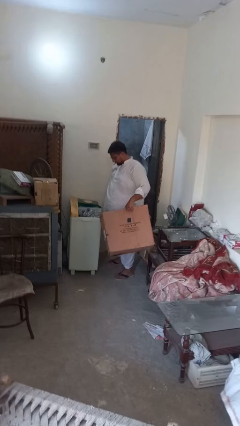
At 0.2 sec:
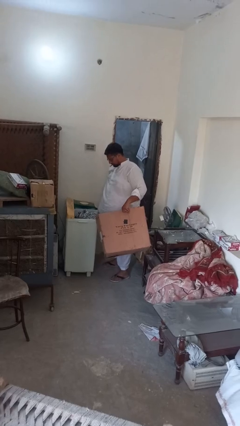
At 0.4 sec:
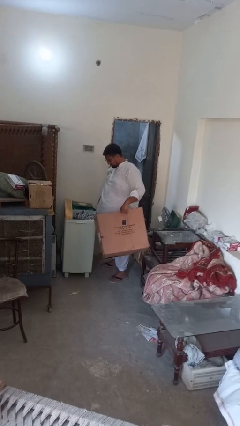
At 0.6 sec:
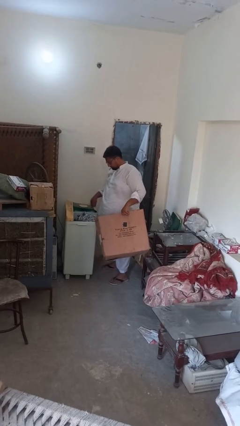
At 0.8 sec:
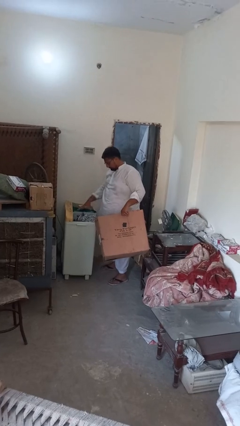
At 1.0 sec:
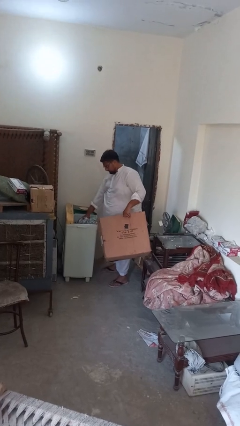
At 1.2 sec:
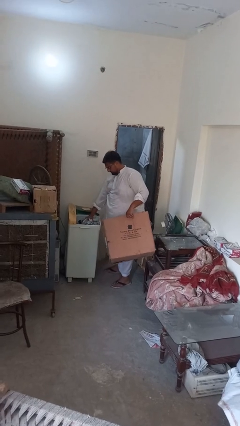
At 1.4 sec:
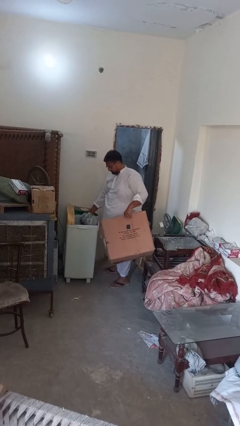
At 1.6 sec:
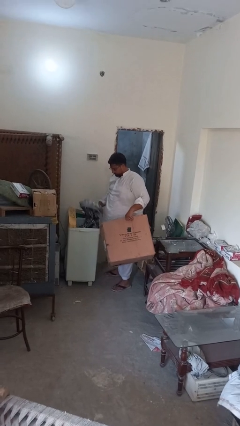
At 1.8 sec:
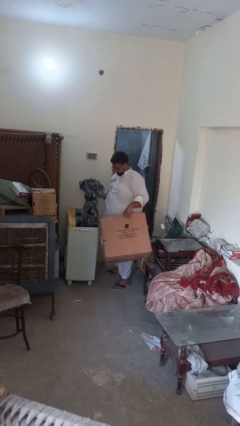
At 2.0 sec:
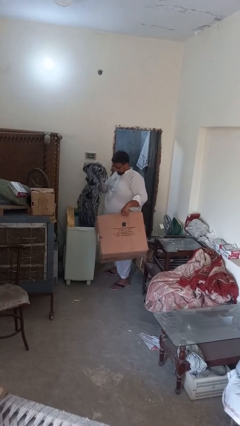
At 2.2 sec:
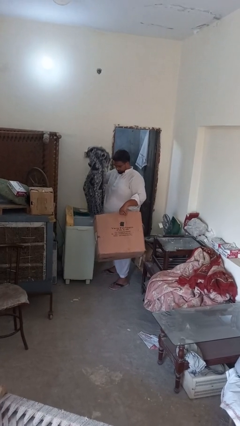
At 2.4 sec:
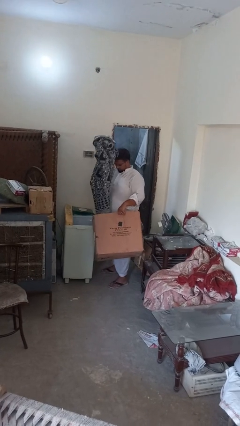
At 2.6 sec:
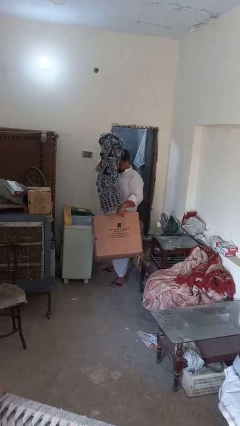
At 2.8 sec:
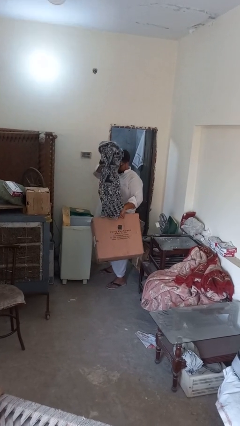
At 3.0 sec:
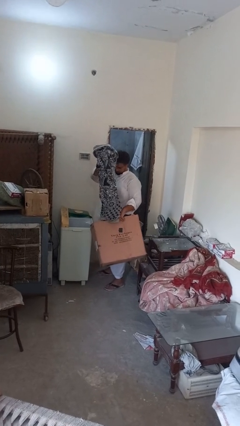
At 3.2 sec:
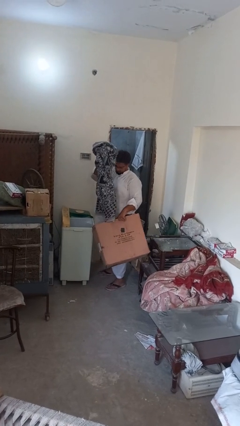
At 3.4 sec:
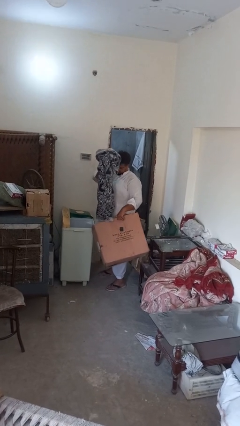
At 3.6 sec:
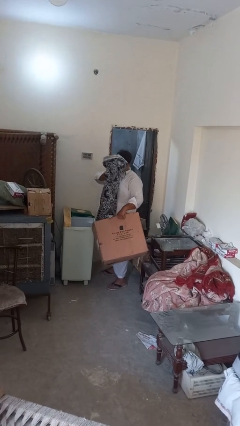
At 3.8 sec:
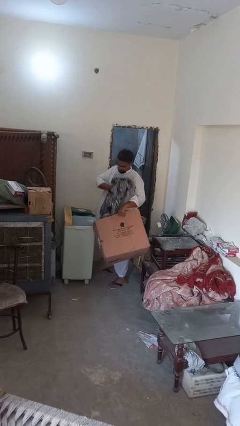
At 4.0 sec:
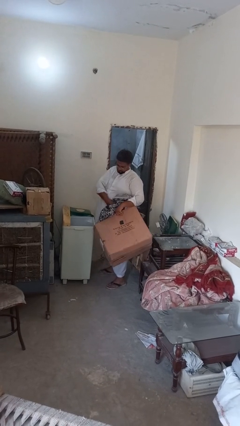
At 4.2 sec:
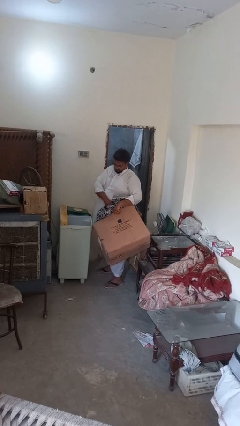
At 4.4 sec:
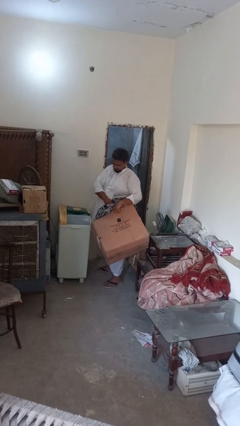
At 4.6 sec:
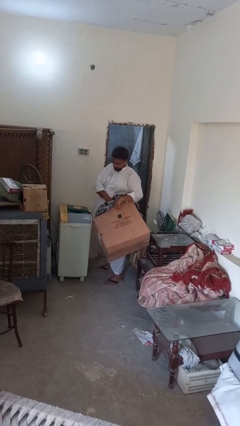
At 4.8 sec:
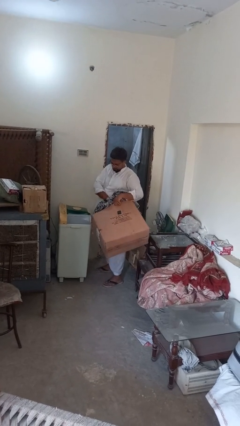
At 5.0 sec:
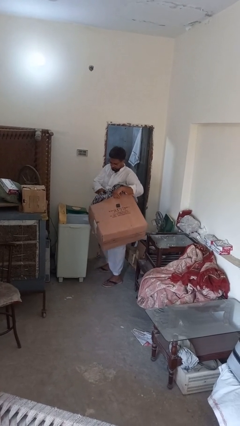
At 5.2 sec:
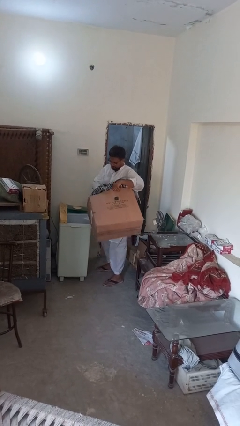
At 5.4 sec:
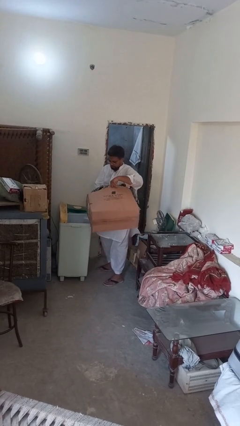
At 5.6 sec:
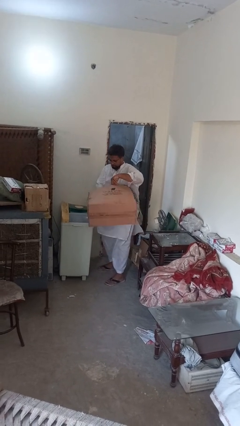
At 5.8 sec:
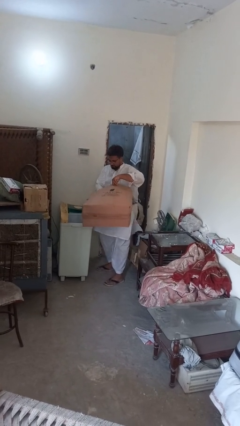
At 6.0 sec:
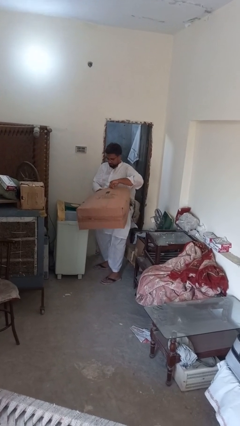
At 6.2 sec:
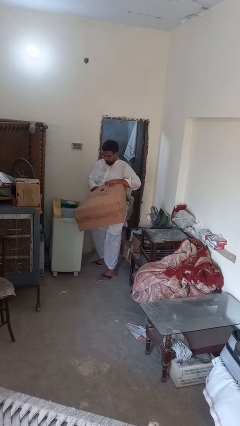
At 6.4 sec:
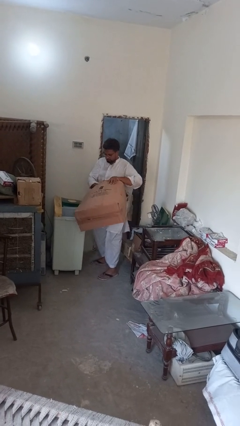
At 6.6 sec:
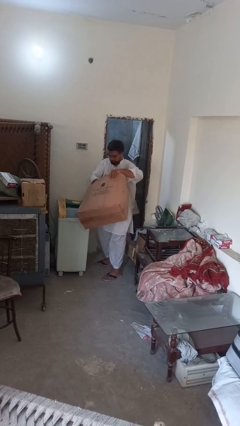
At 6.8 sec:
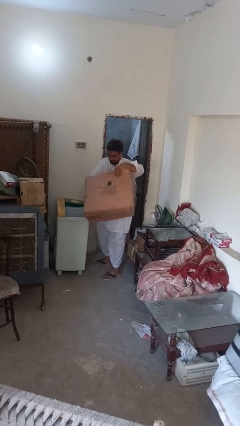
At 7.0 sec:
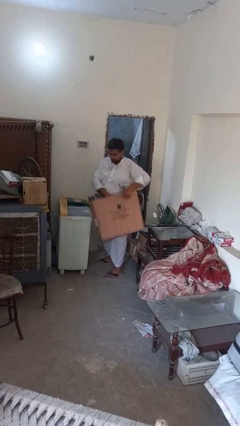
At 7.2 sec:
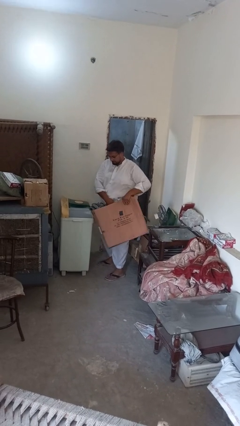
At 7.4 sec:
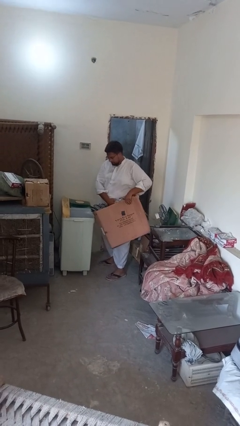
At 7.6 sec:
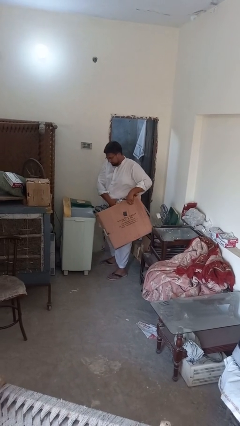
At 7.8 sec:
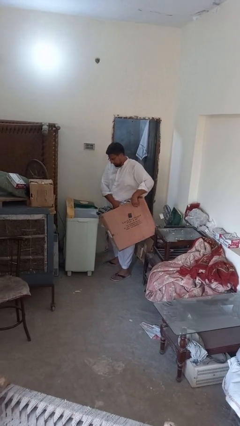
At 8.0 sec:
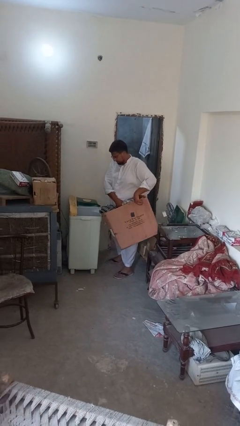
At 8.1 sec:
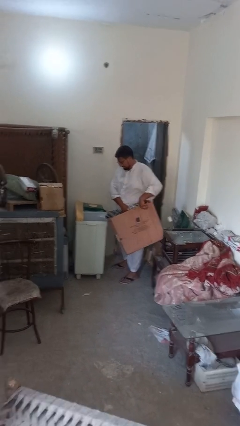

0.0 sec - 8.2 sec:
person unloads dryer

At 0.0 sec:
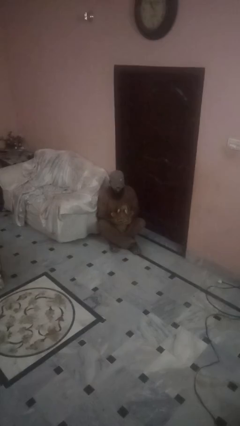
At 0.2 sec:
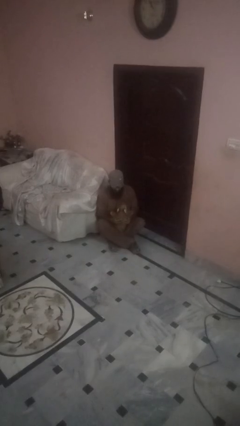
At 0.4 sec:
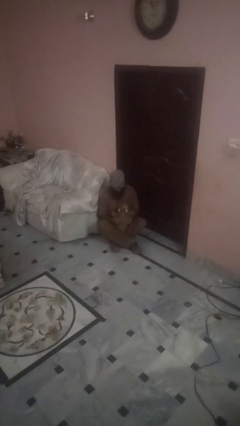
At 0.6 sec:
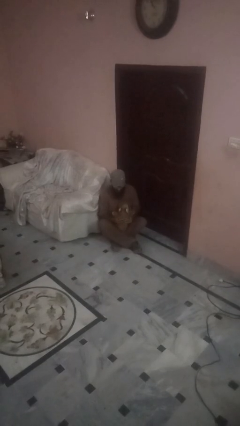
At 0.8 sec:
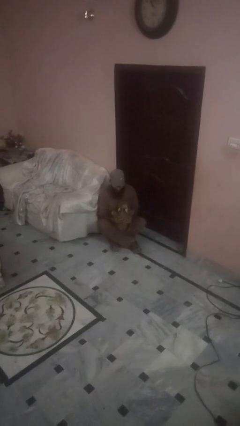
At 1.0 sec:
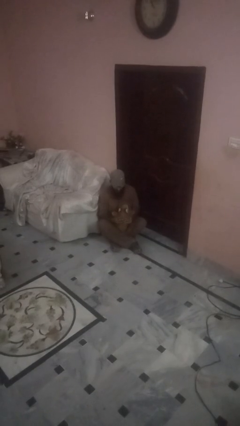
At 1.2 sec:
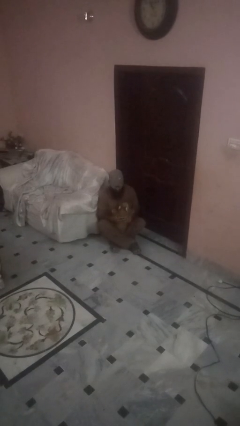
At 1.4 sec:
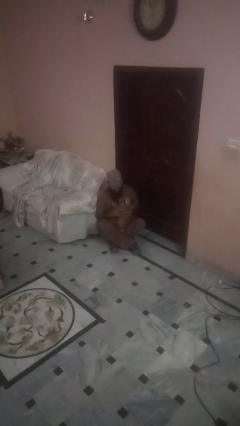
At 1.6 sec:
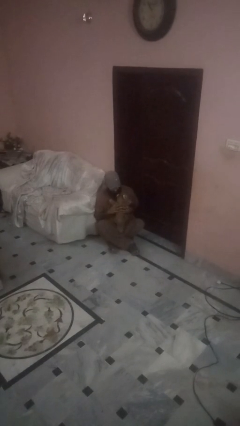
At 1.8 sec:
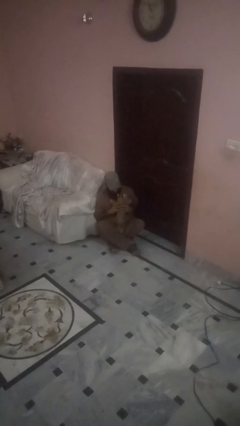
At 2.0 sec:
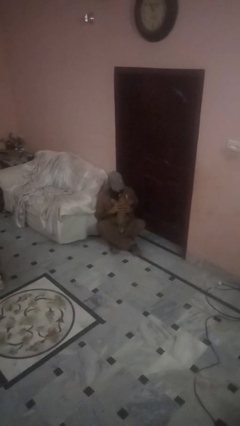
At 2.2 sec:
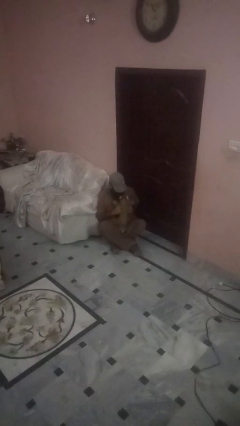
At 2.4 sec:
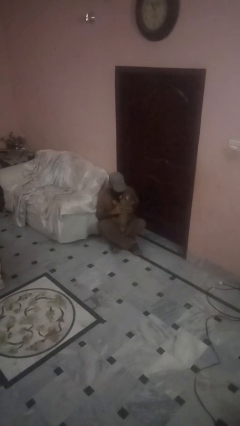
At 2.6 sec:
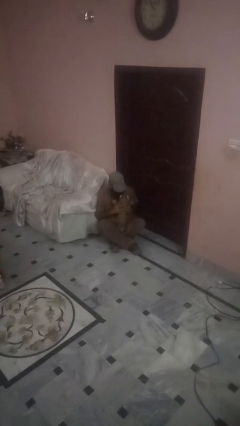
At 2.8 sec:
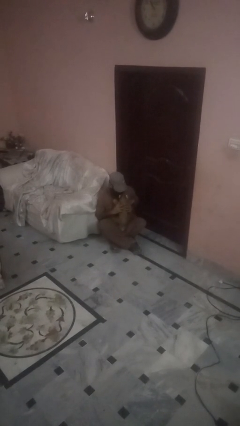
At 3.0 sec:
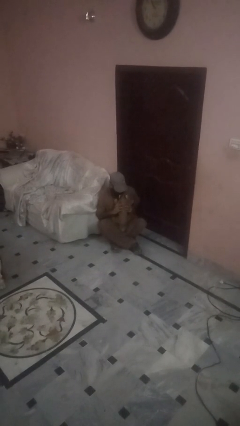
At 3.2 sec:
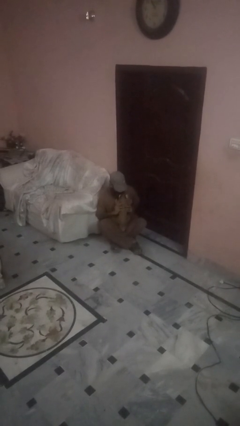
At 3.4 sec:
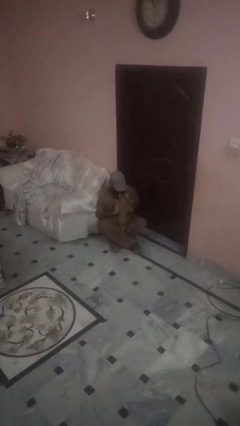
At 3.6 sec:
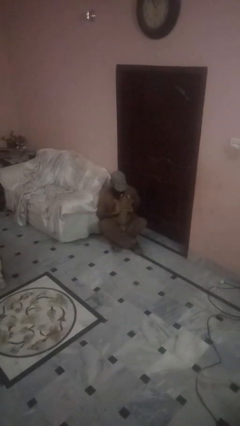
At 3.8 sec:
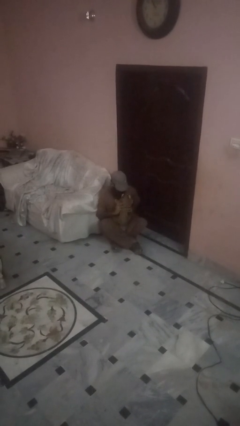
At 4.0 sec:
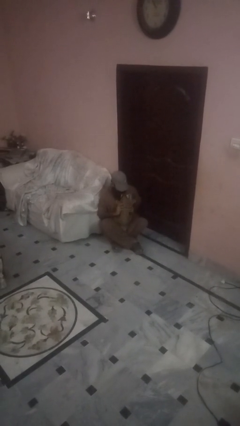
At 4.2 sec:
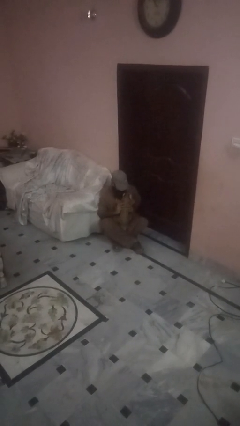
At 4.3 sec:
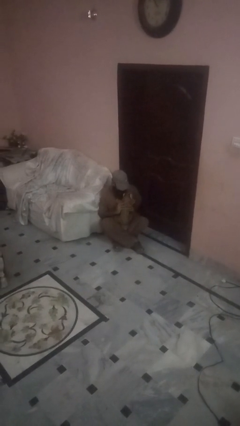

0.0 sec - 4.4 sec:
person hugs dog

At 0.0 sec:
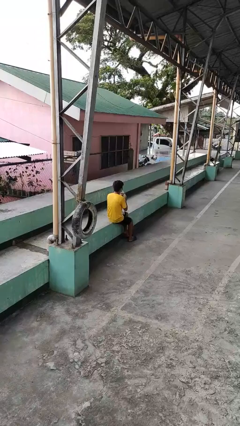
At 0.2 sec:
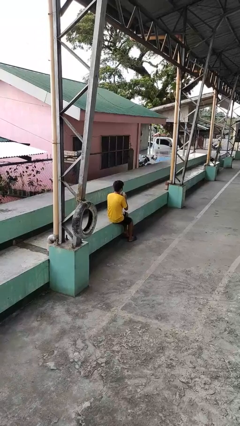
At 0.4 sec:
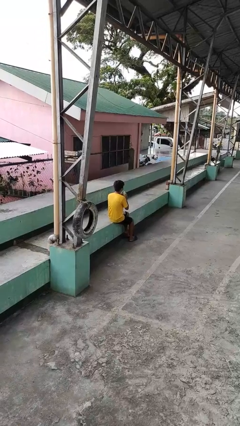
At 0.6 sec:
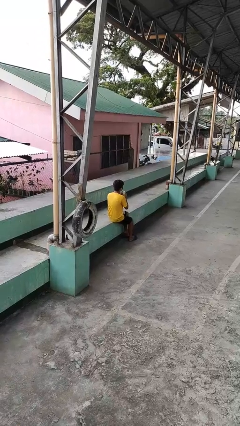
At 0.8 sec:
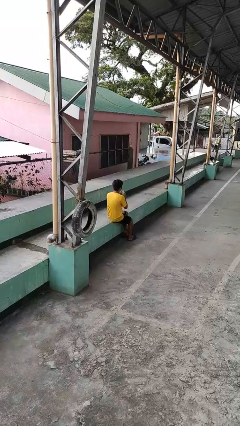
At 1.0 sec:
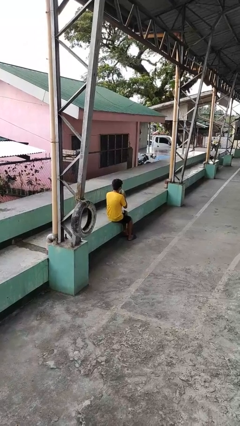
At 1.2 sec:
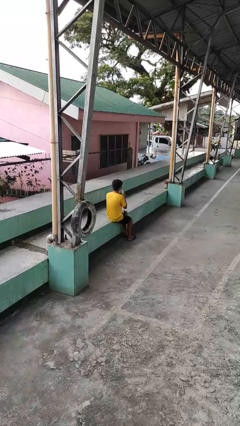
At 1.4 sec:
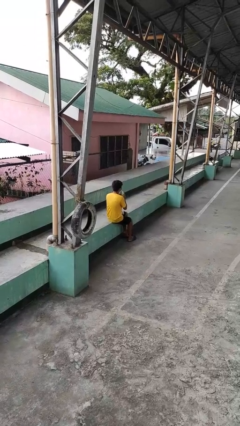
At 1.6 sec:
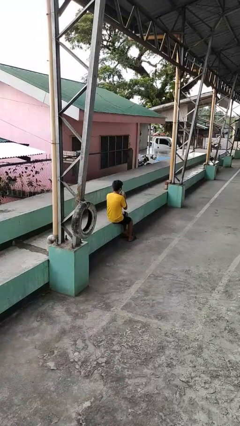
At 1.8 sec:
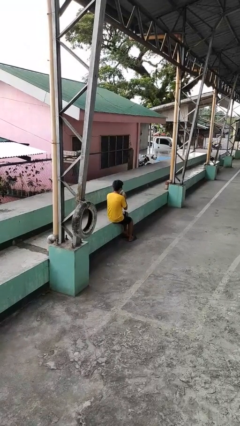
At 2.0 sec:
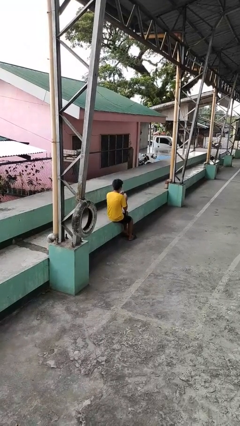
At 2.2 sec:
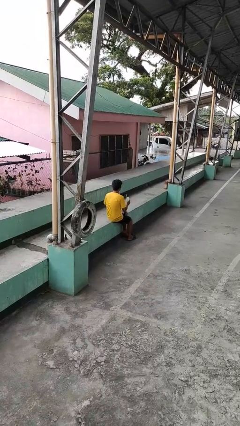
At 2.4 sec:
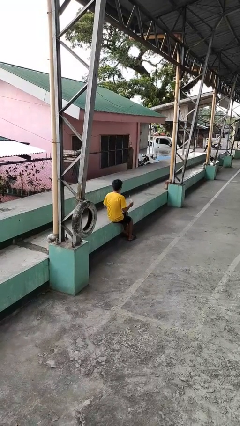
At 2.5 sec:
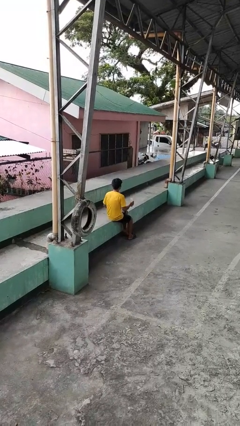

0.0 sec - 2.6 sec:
person drinks from straw

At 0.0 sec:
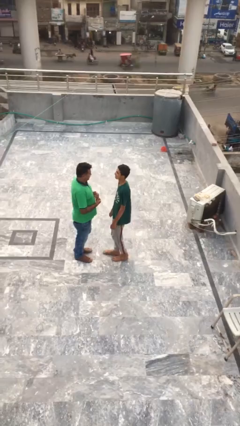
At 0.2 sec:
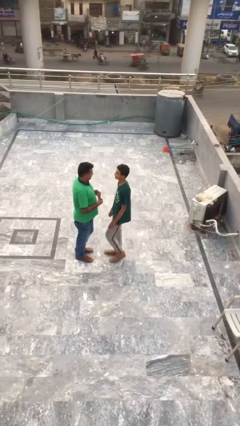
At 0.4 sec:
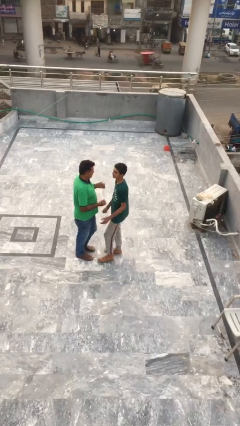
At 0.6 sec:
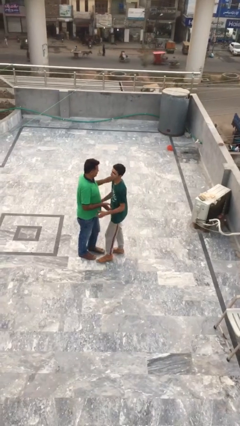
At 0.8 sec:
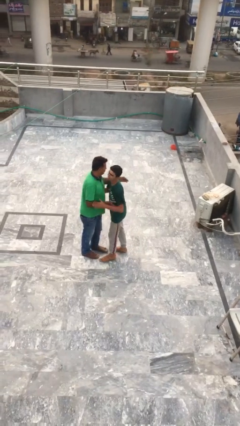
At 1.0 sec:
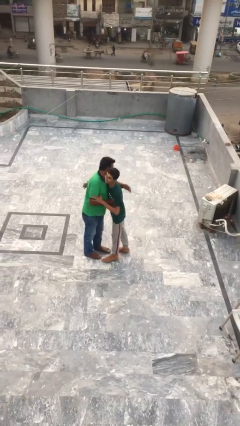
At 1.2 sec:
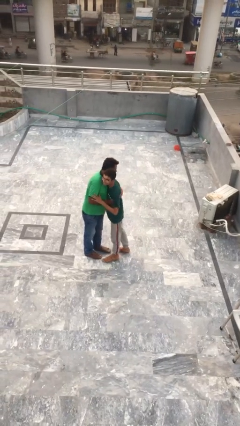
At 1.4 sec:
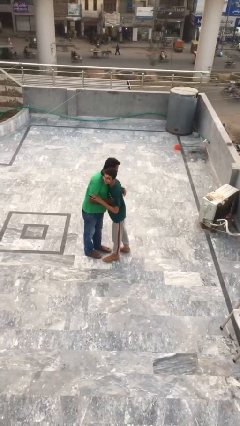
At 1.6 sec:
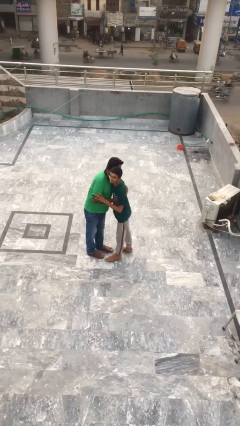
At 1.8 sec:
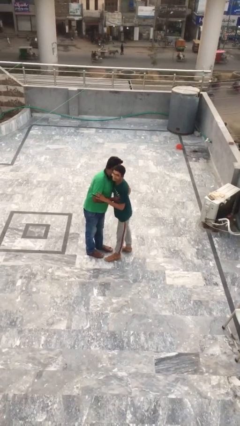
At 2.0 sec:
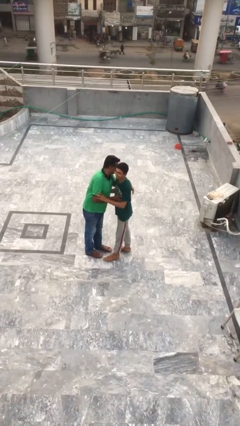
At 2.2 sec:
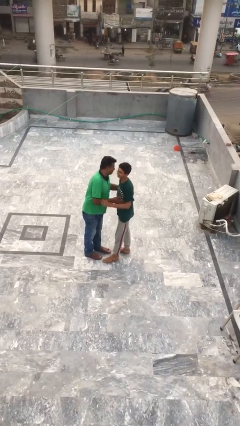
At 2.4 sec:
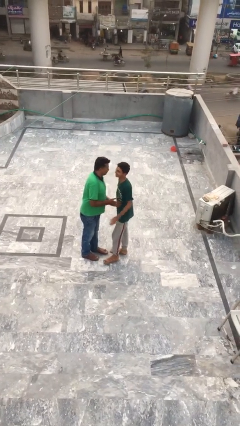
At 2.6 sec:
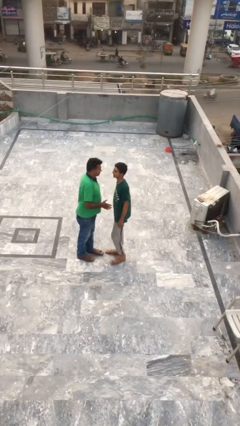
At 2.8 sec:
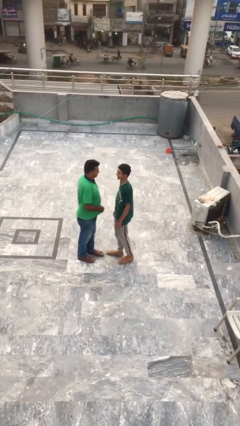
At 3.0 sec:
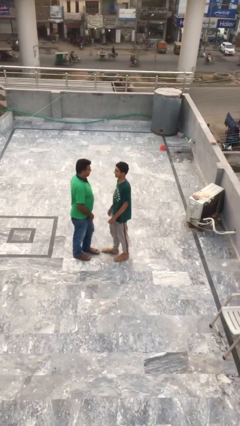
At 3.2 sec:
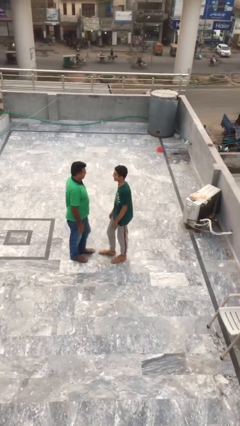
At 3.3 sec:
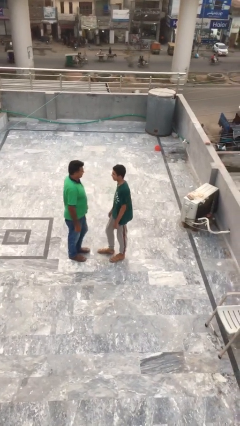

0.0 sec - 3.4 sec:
person embraces person
